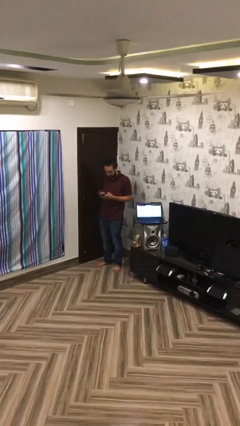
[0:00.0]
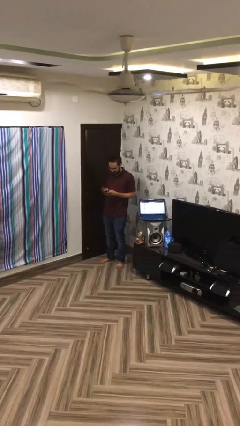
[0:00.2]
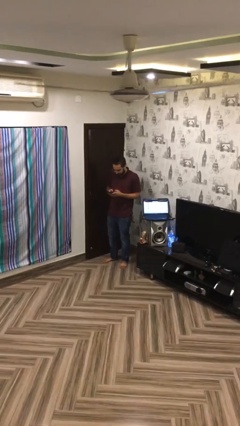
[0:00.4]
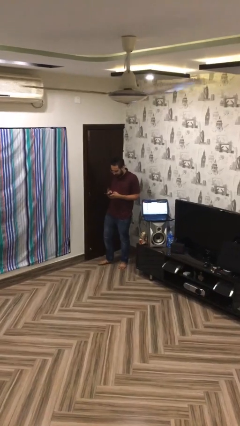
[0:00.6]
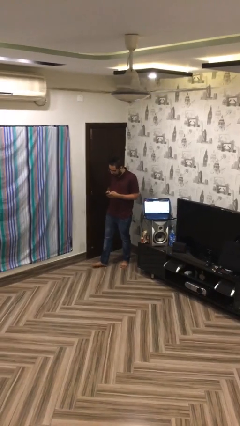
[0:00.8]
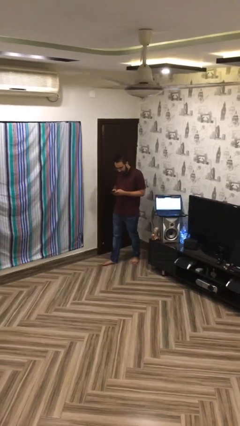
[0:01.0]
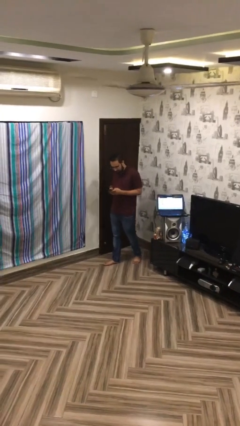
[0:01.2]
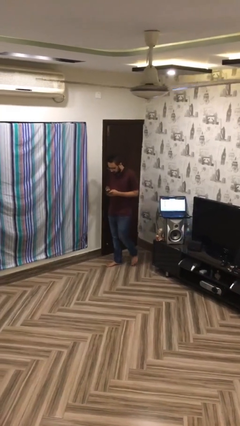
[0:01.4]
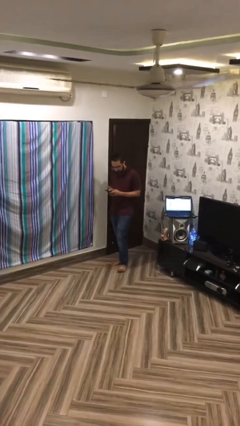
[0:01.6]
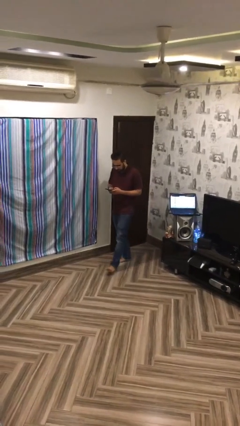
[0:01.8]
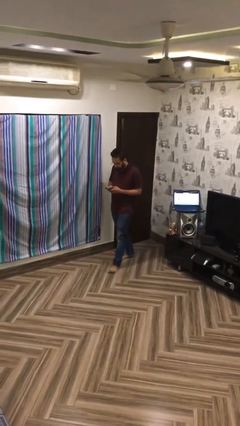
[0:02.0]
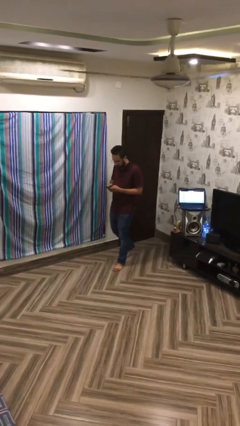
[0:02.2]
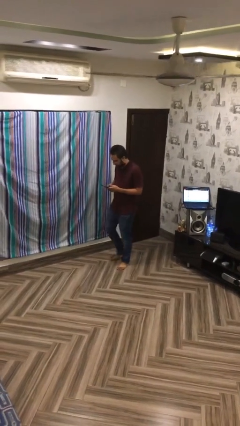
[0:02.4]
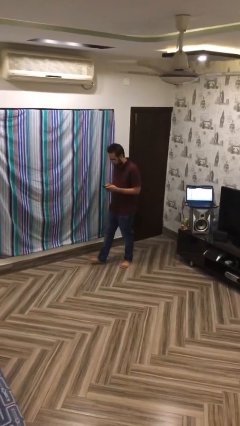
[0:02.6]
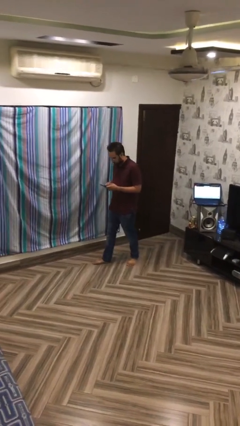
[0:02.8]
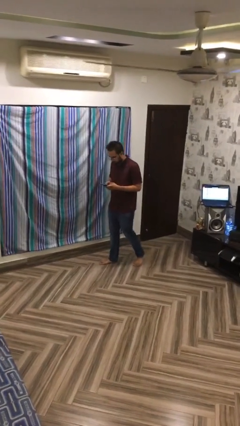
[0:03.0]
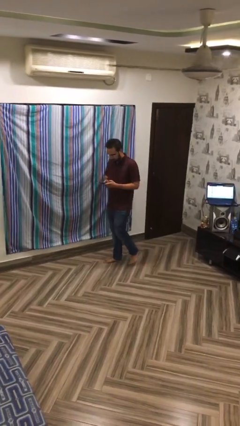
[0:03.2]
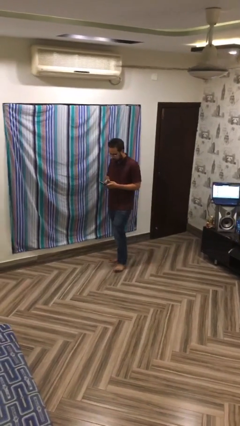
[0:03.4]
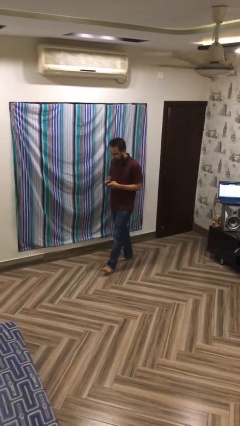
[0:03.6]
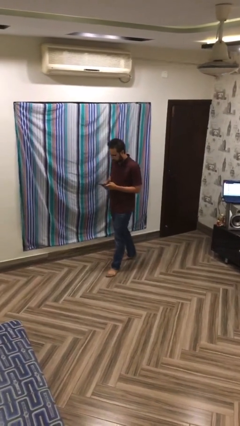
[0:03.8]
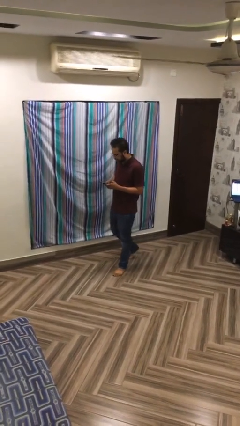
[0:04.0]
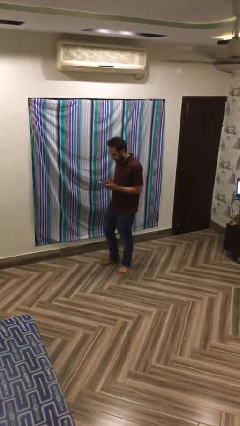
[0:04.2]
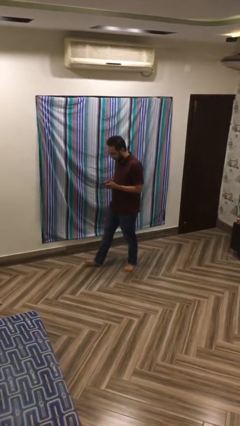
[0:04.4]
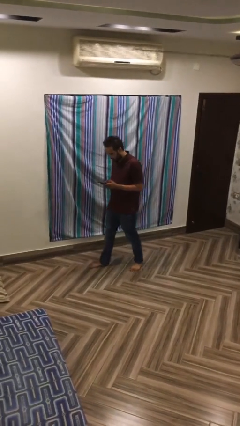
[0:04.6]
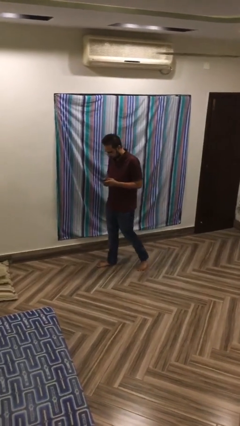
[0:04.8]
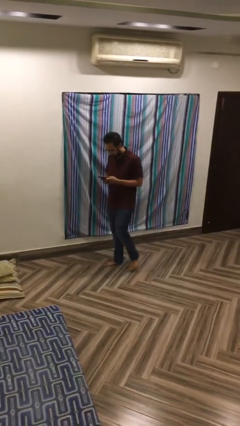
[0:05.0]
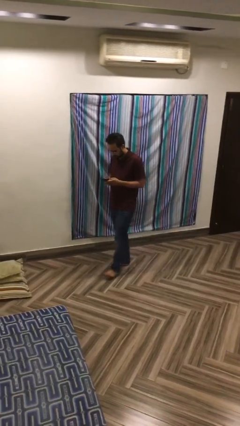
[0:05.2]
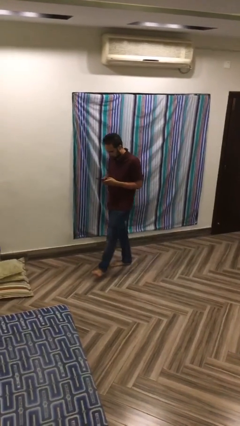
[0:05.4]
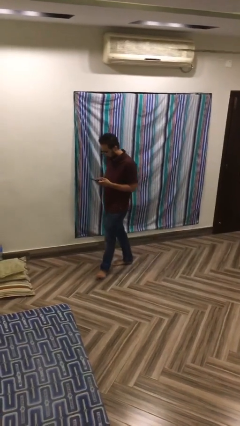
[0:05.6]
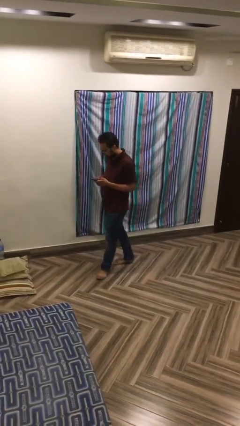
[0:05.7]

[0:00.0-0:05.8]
person texts on phone

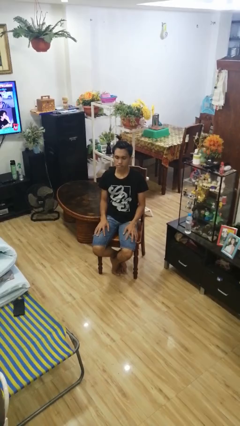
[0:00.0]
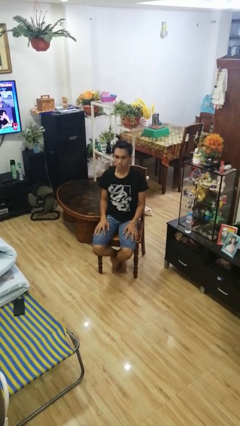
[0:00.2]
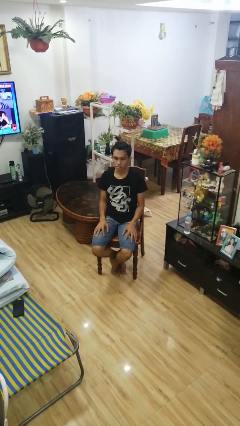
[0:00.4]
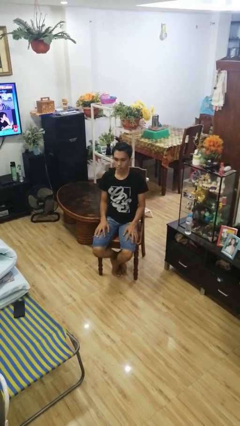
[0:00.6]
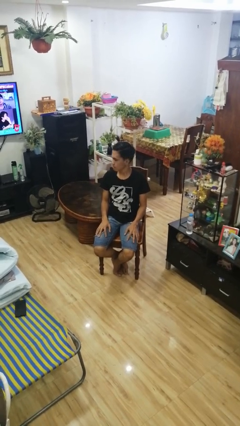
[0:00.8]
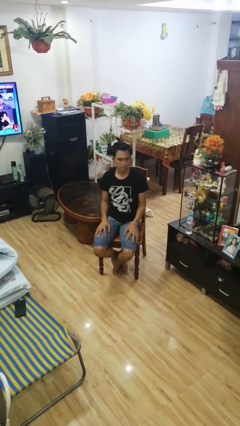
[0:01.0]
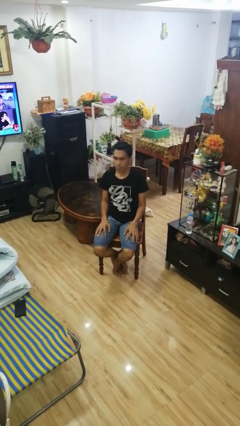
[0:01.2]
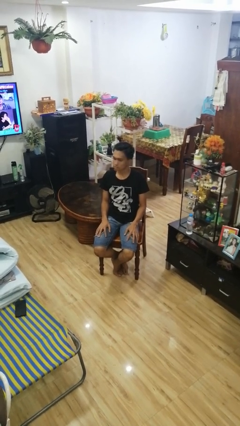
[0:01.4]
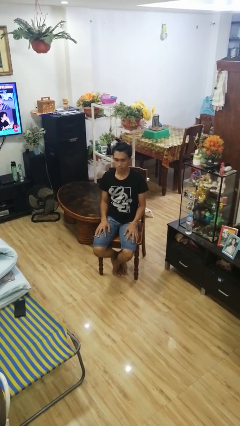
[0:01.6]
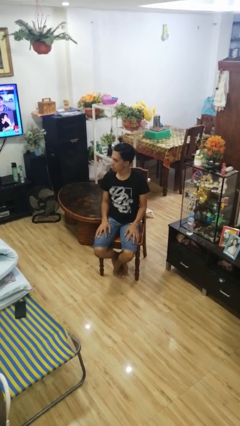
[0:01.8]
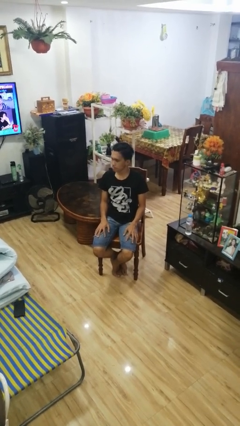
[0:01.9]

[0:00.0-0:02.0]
person shakes head

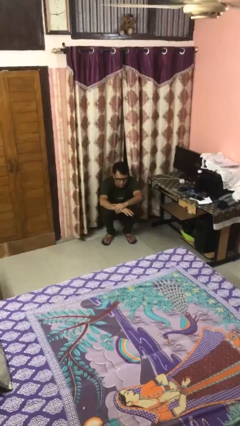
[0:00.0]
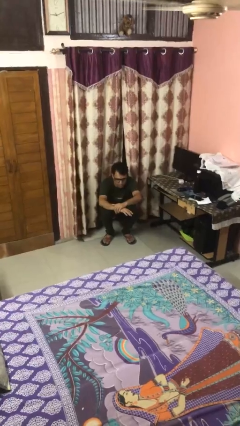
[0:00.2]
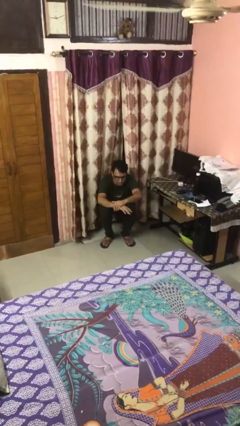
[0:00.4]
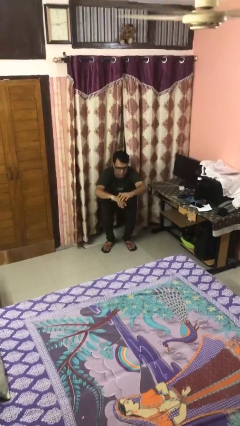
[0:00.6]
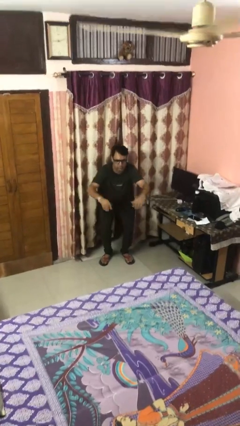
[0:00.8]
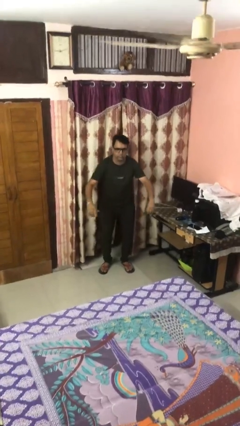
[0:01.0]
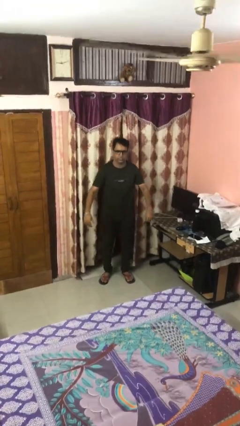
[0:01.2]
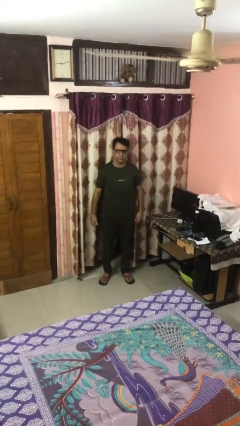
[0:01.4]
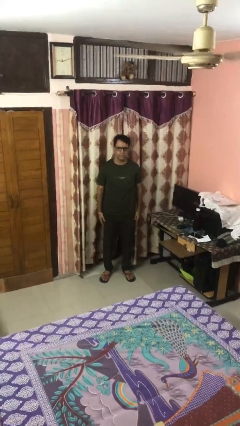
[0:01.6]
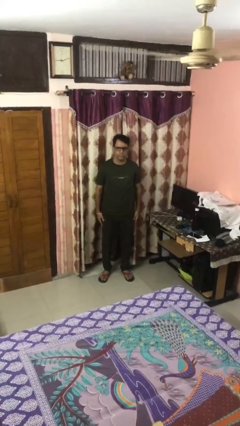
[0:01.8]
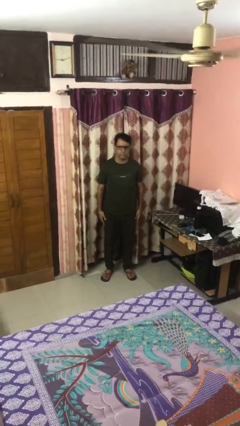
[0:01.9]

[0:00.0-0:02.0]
person stands up

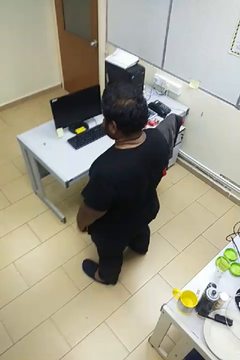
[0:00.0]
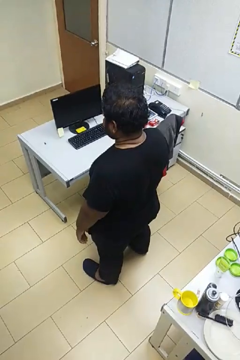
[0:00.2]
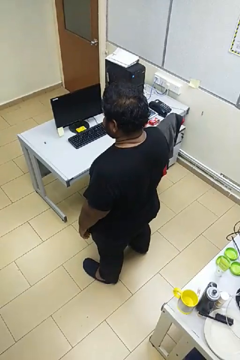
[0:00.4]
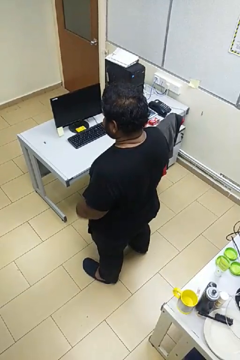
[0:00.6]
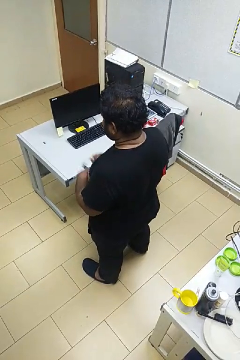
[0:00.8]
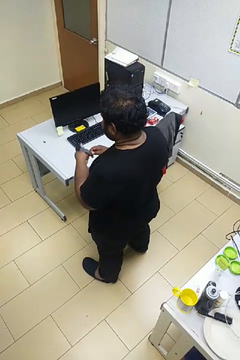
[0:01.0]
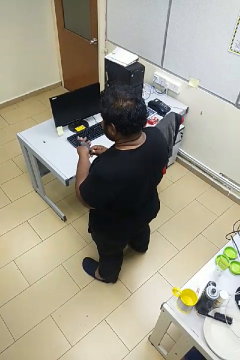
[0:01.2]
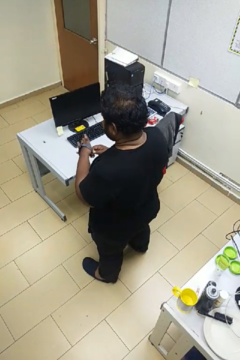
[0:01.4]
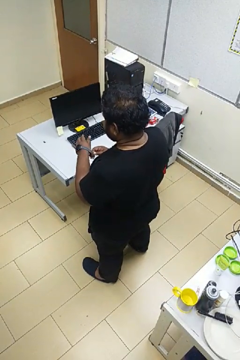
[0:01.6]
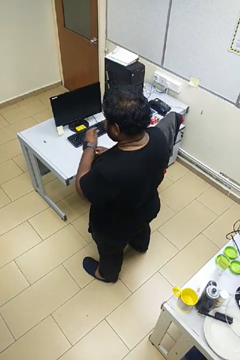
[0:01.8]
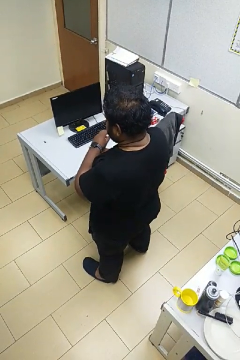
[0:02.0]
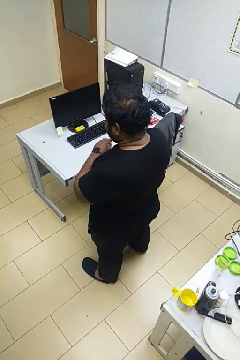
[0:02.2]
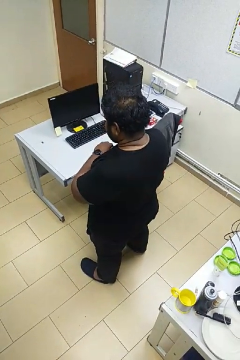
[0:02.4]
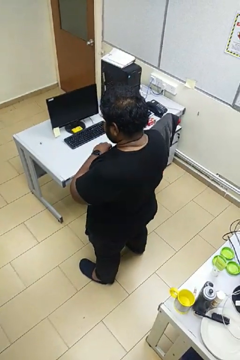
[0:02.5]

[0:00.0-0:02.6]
person puts on wristwatch

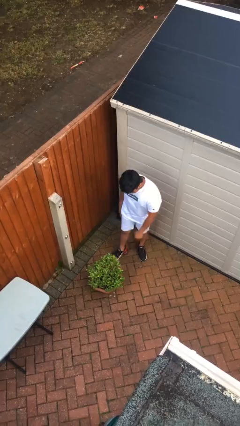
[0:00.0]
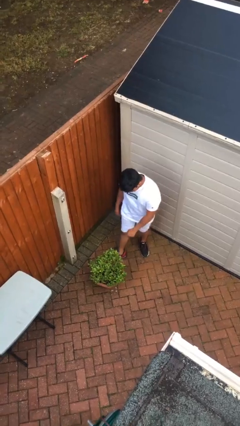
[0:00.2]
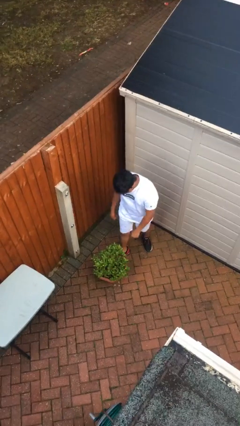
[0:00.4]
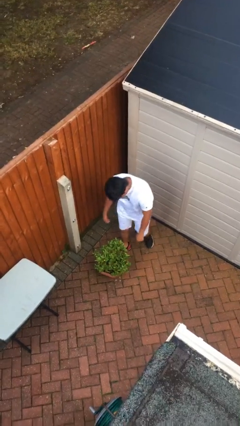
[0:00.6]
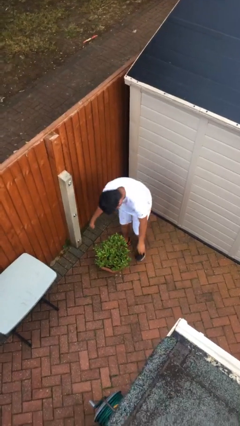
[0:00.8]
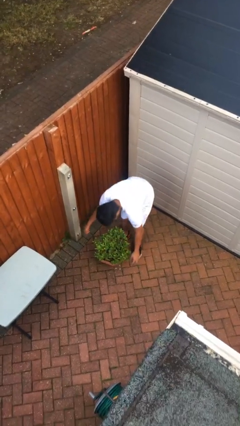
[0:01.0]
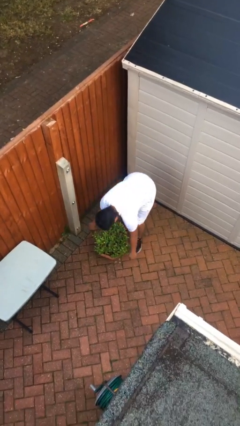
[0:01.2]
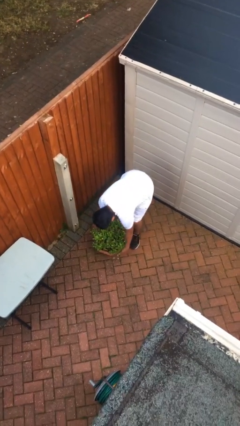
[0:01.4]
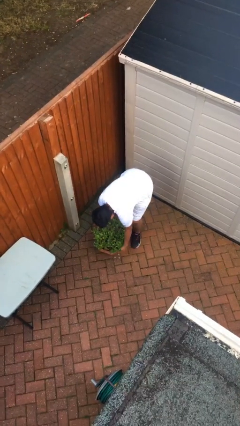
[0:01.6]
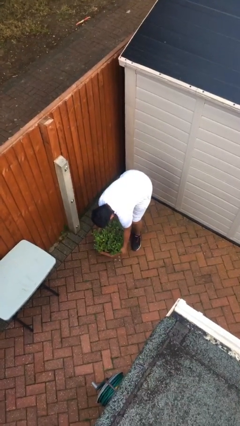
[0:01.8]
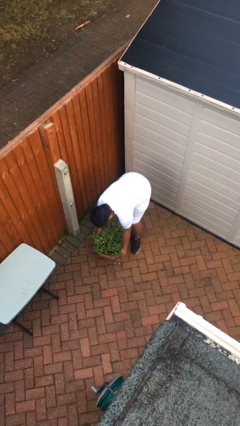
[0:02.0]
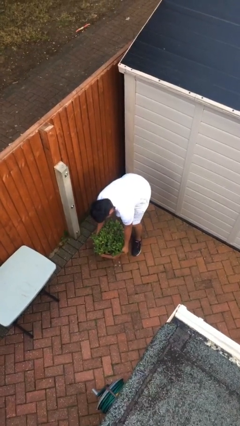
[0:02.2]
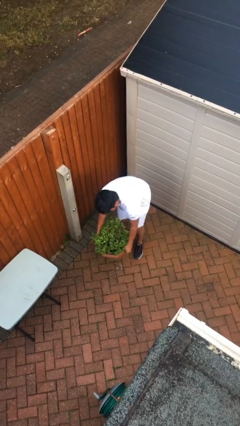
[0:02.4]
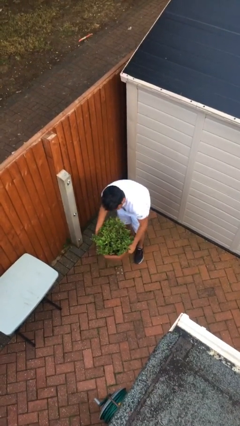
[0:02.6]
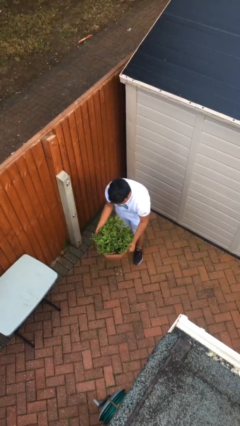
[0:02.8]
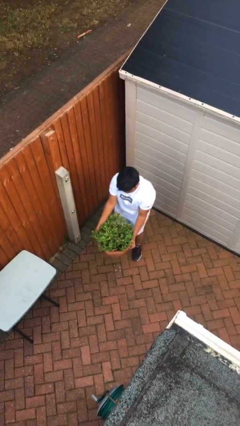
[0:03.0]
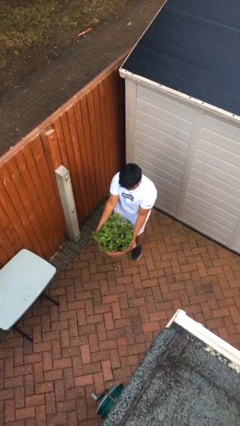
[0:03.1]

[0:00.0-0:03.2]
person picks up object from floor

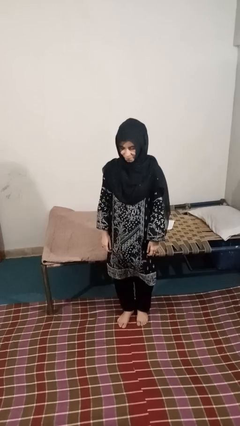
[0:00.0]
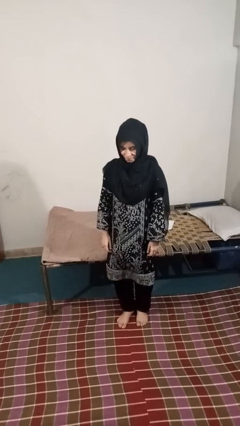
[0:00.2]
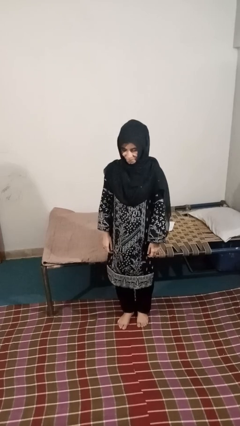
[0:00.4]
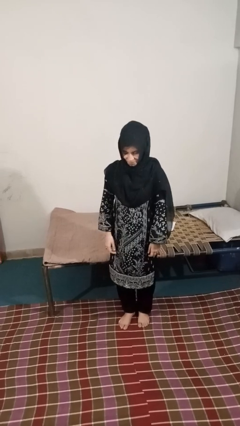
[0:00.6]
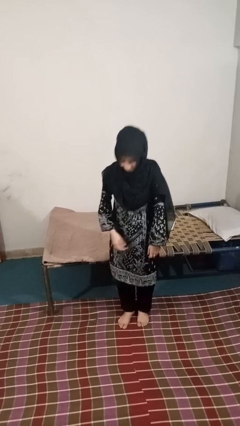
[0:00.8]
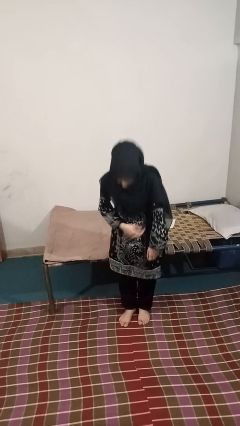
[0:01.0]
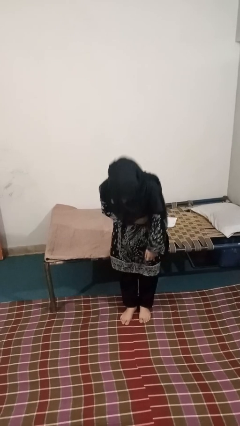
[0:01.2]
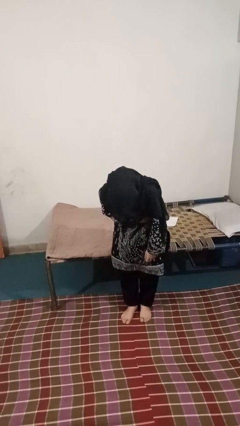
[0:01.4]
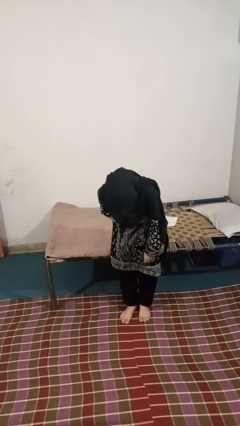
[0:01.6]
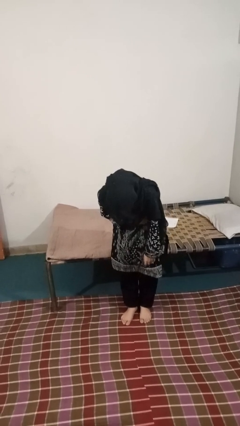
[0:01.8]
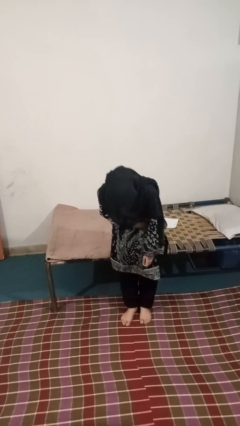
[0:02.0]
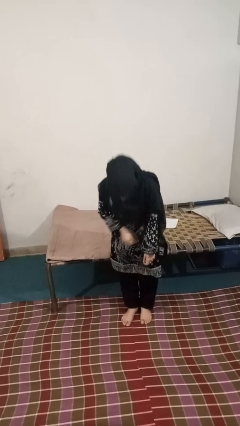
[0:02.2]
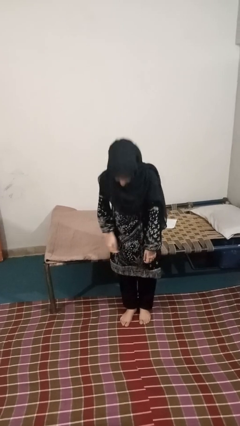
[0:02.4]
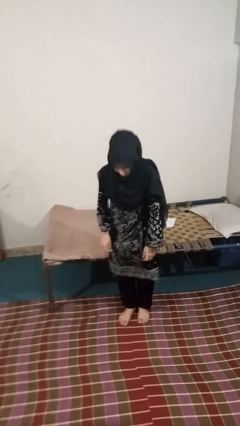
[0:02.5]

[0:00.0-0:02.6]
person bows
